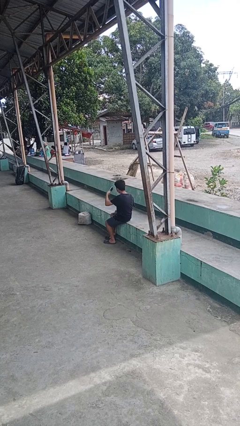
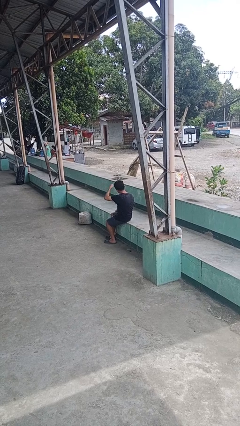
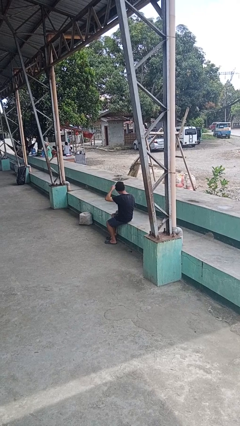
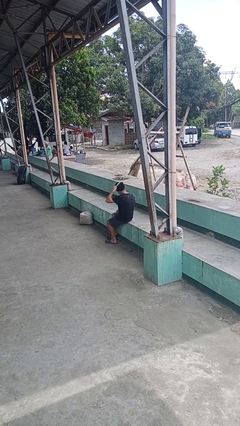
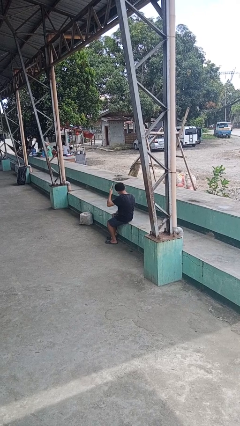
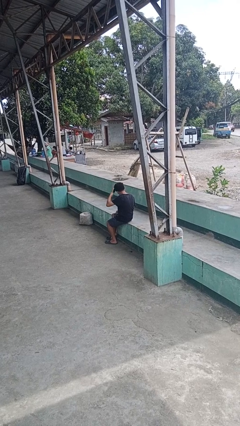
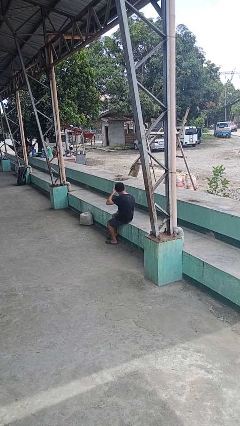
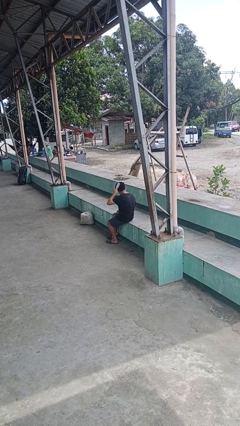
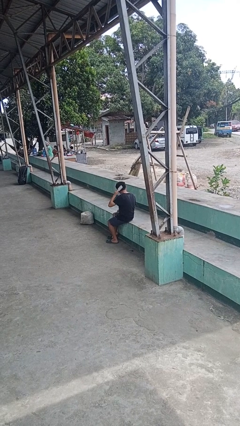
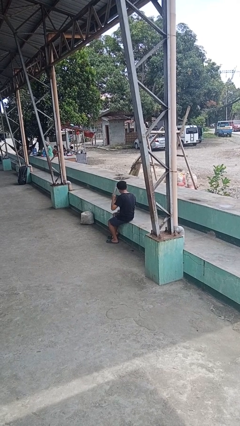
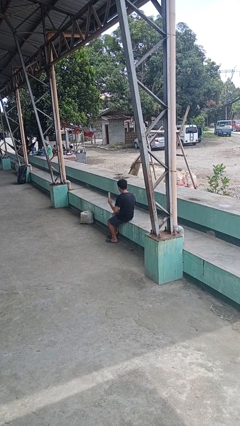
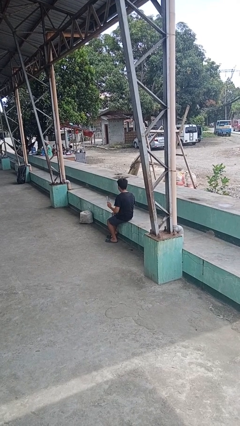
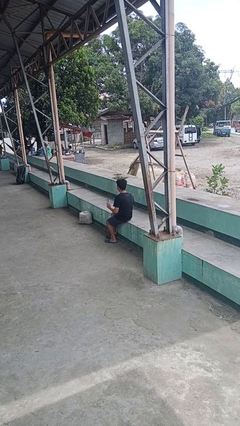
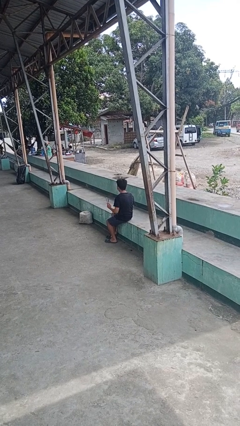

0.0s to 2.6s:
person brushes hair

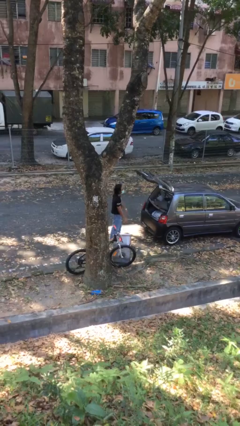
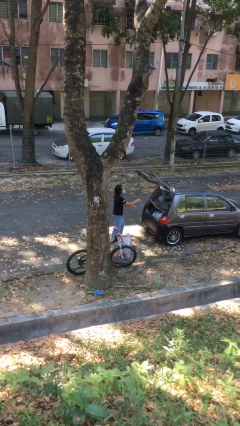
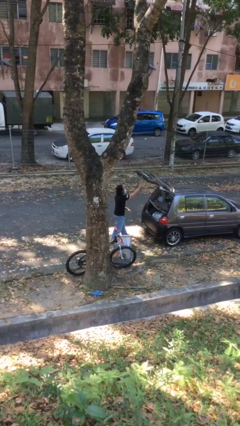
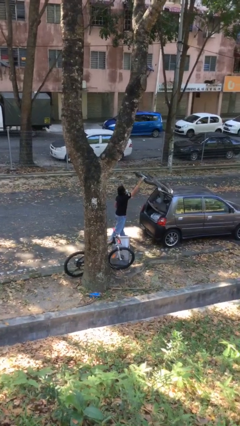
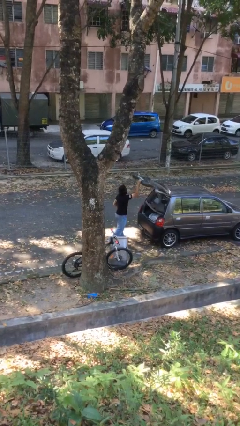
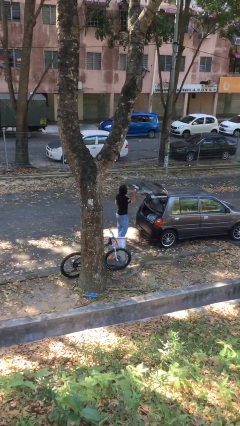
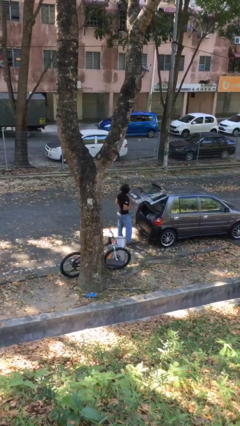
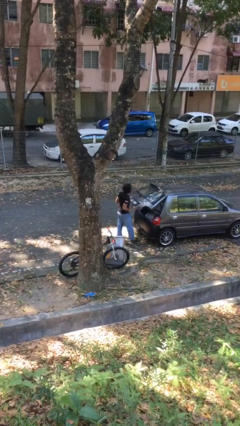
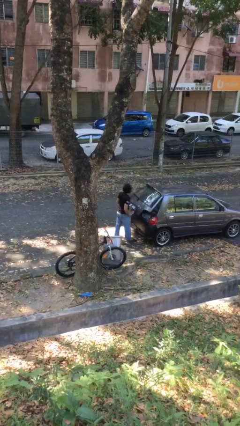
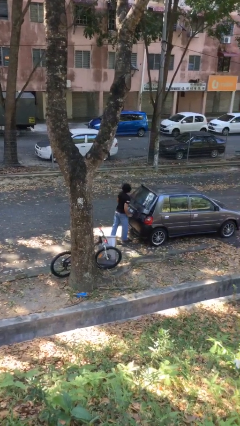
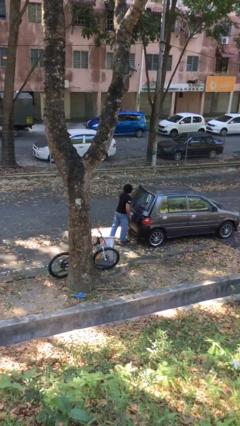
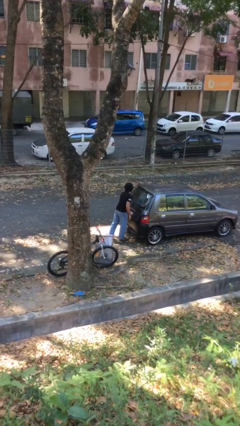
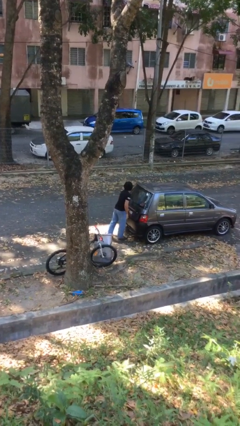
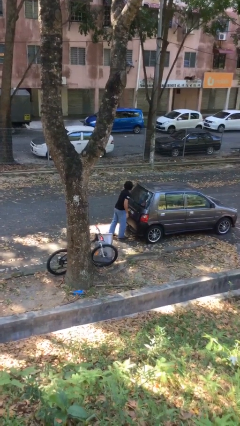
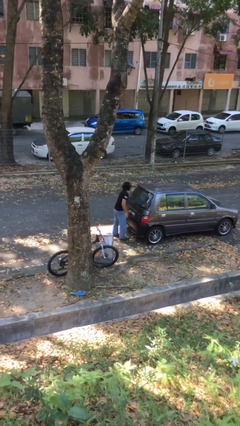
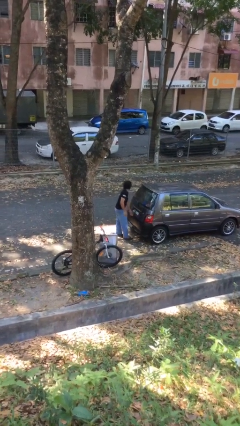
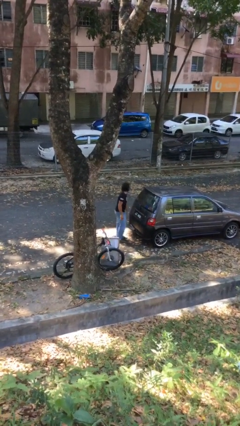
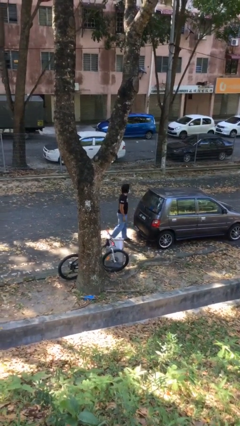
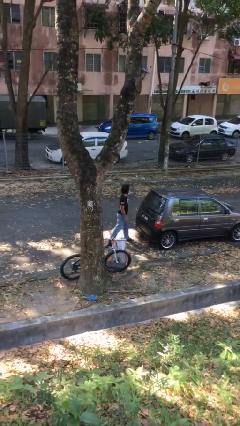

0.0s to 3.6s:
person closes car trunk

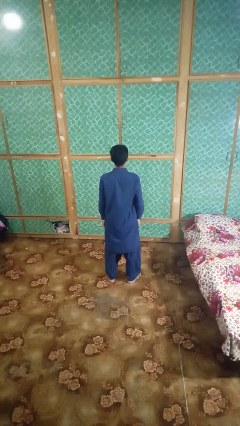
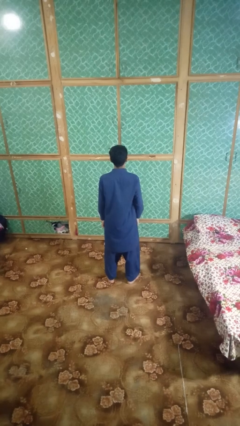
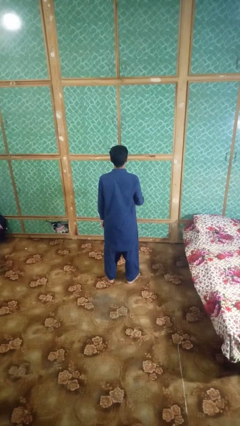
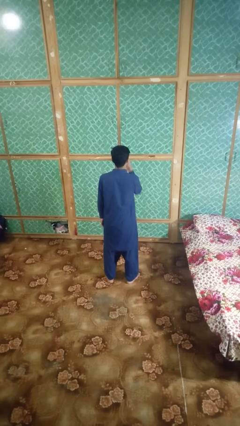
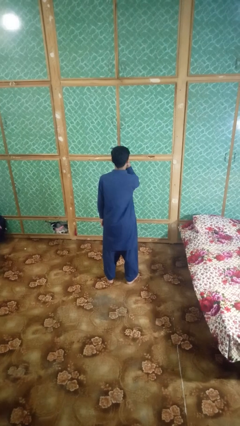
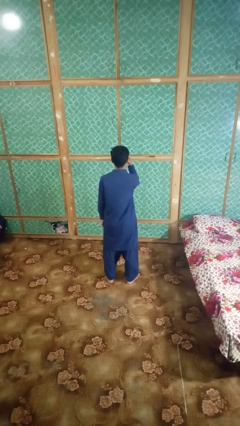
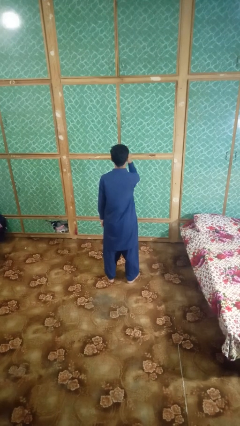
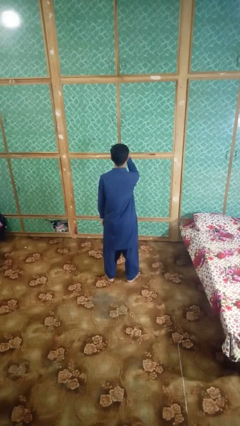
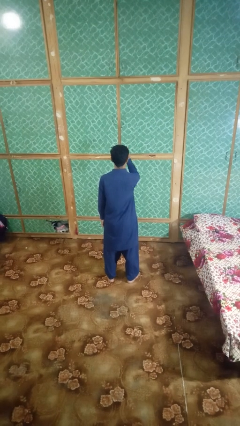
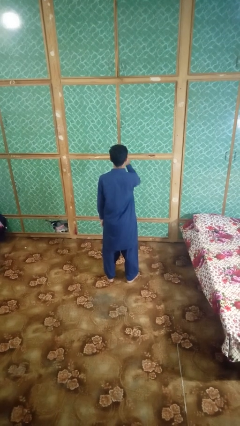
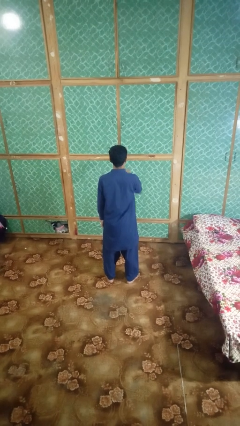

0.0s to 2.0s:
person gestures watch closely

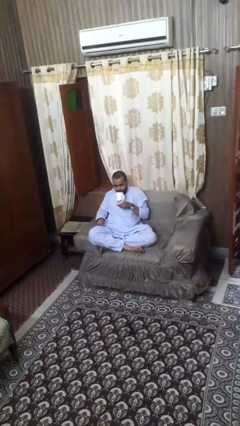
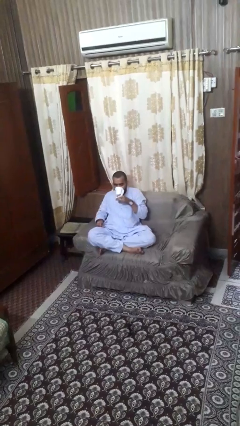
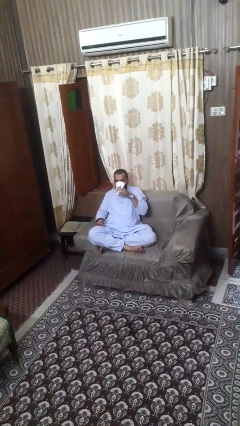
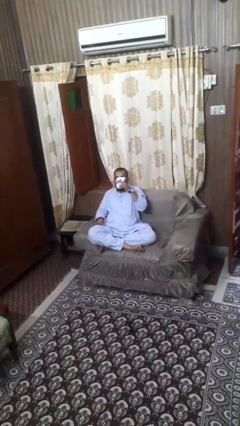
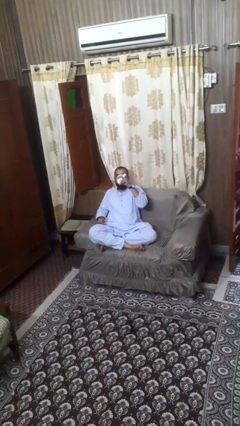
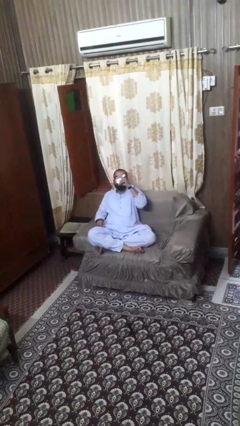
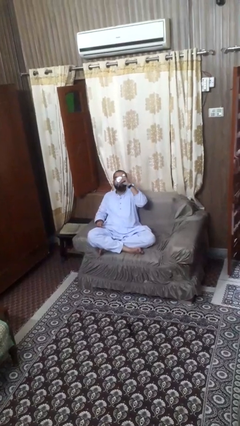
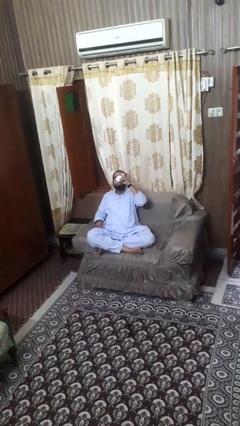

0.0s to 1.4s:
person drinks from mug

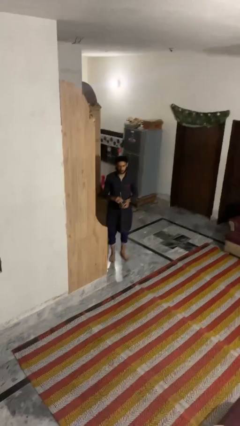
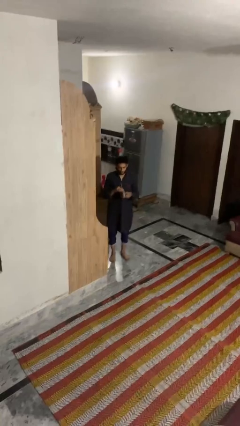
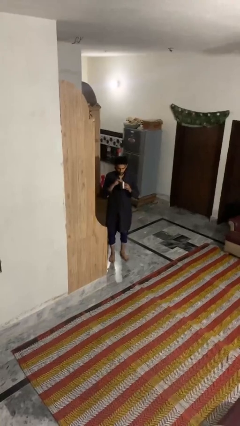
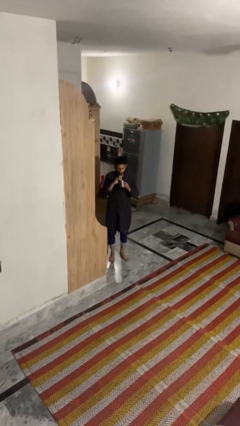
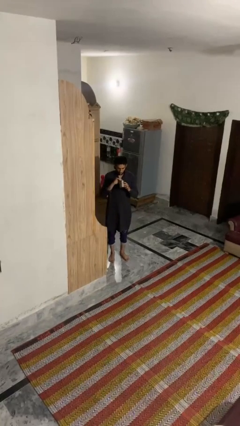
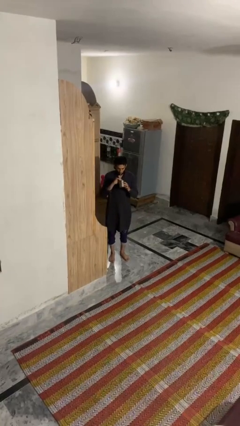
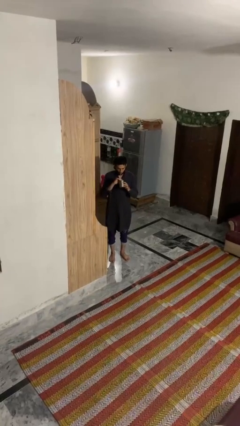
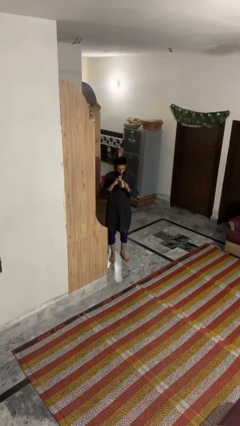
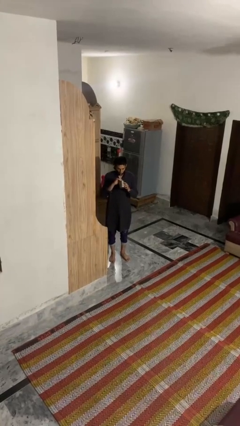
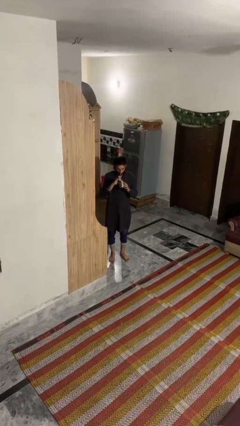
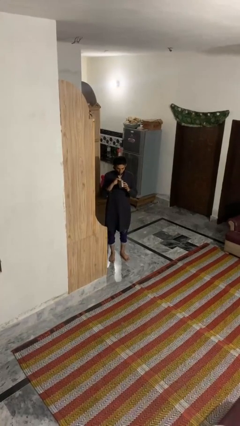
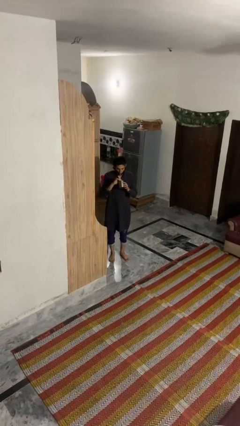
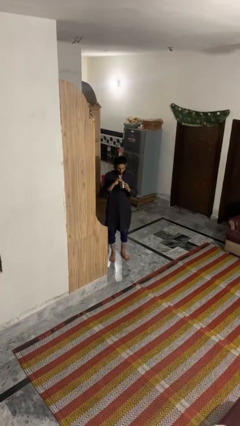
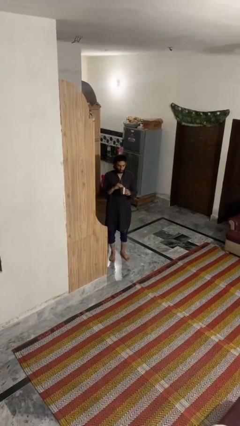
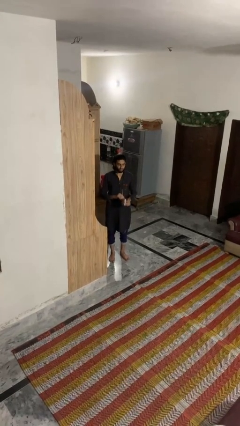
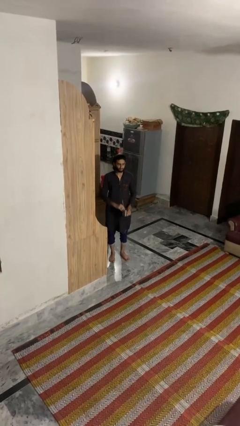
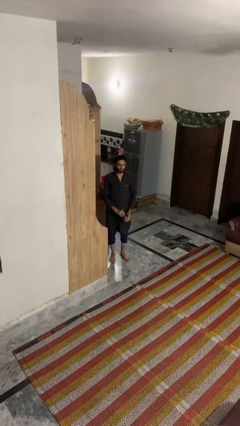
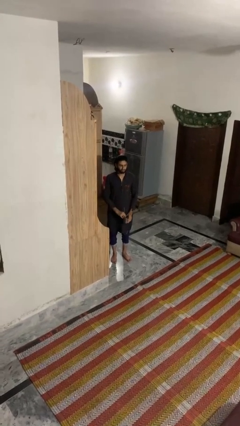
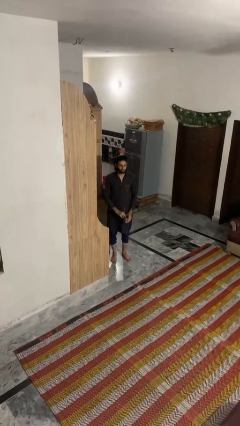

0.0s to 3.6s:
person drinks from straw

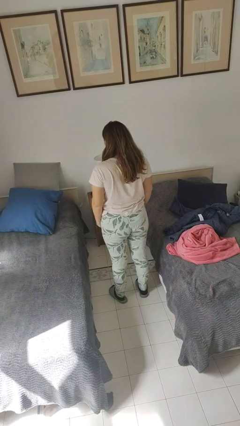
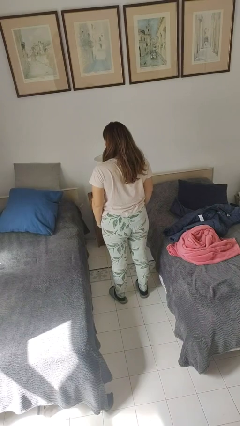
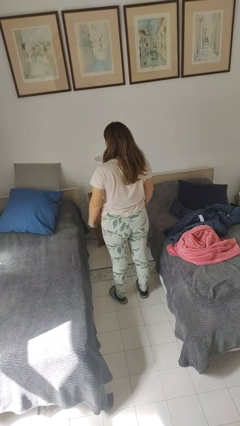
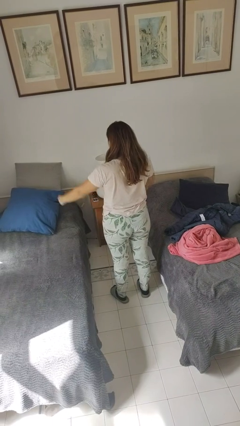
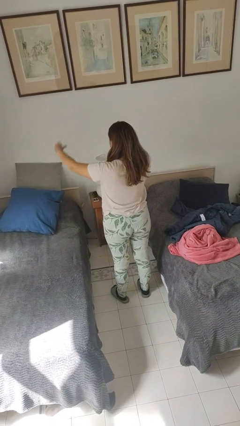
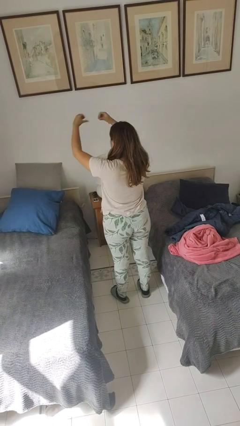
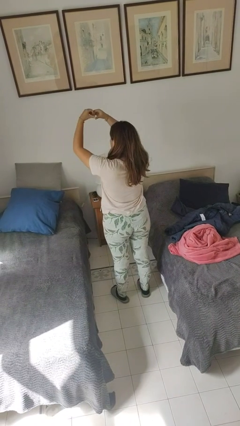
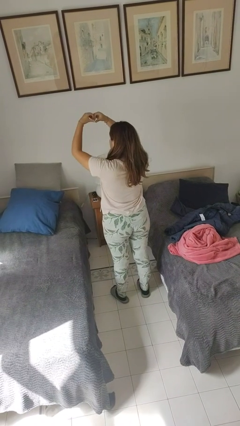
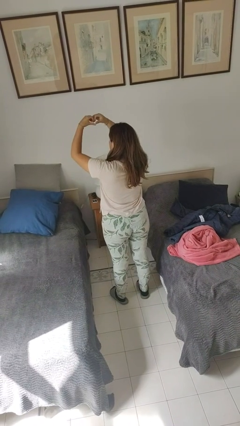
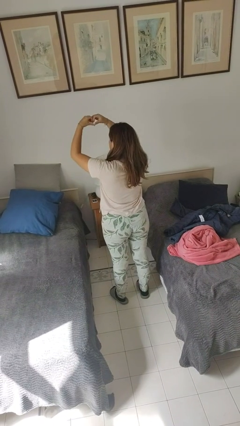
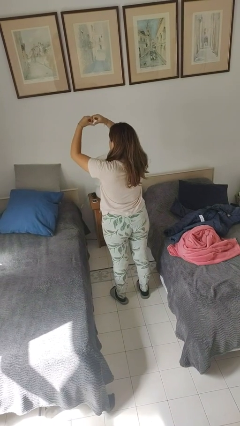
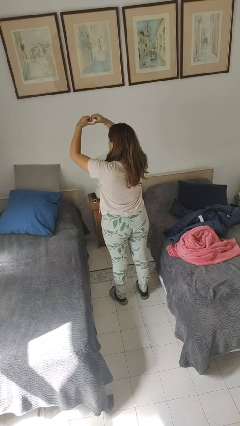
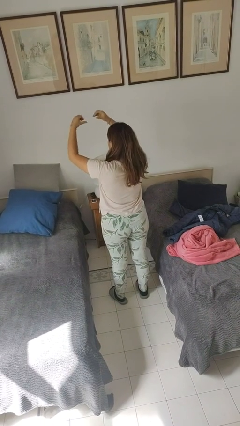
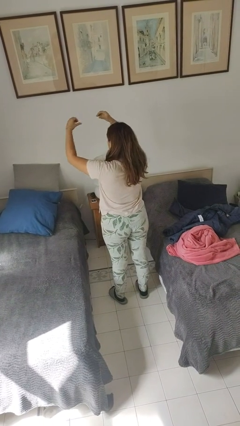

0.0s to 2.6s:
person gestures heart

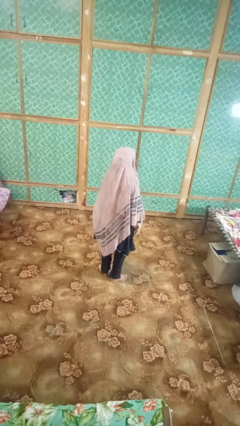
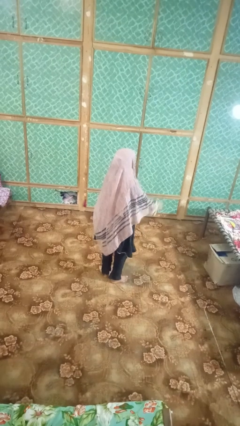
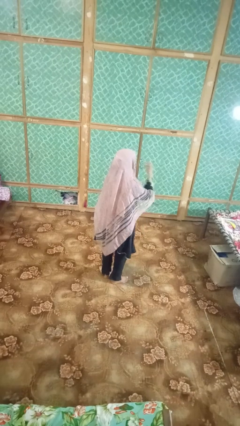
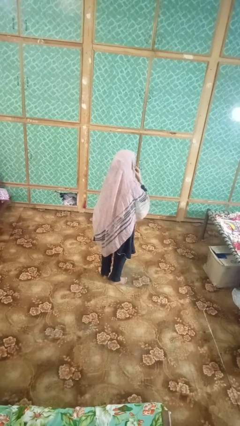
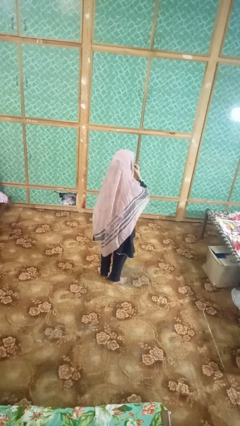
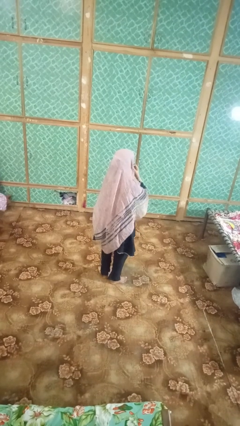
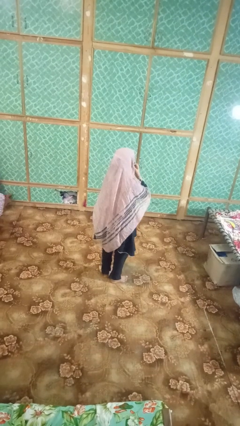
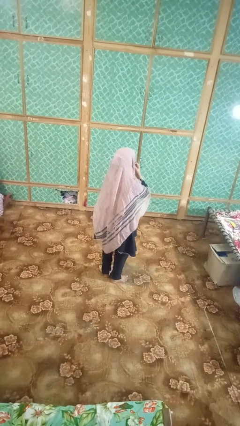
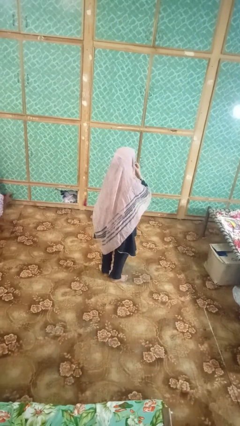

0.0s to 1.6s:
person strokes chin
